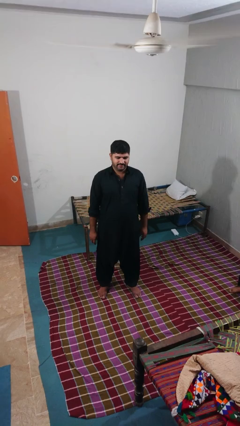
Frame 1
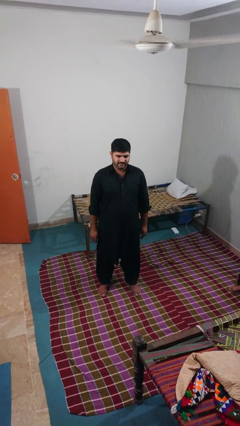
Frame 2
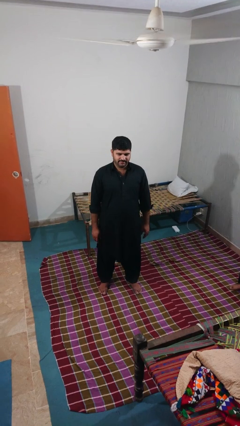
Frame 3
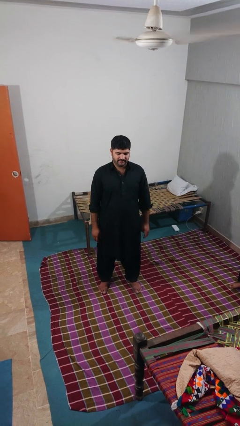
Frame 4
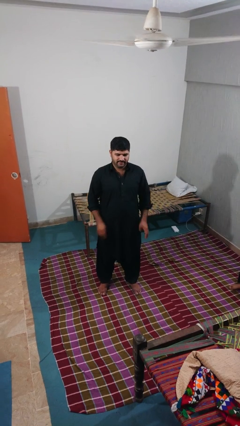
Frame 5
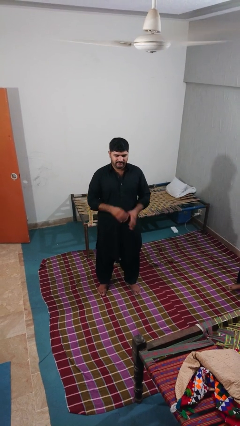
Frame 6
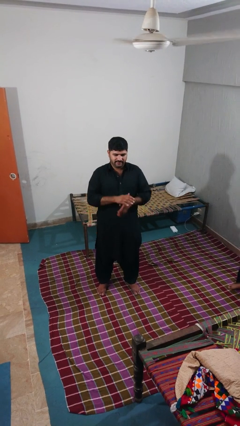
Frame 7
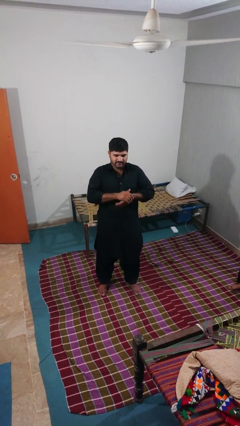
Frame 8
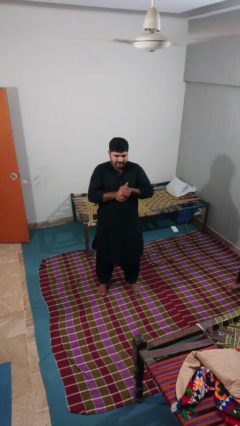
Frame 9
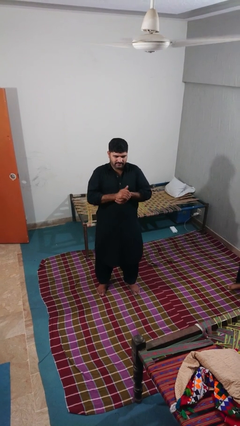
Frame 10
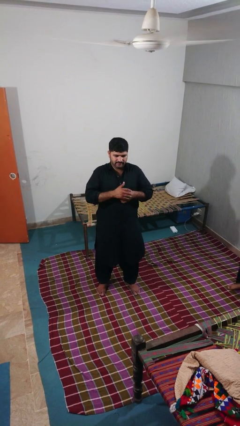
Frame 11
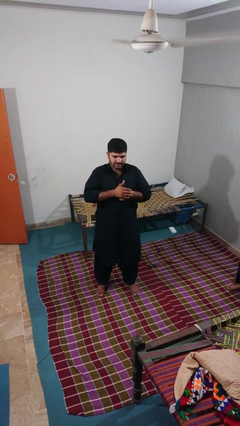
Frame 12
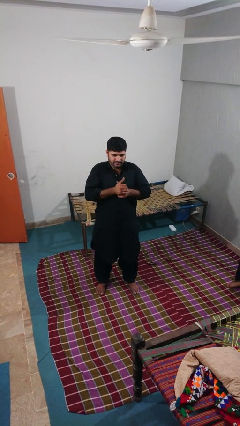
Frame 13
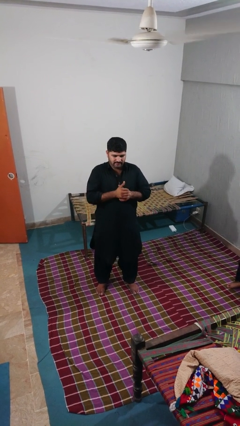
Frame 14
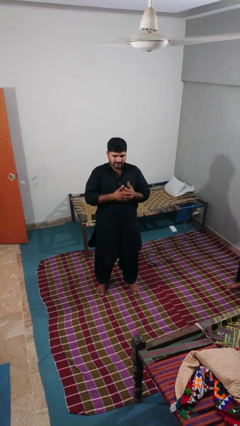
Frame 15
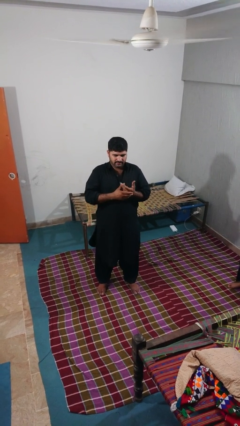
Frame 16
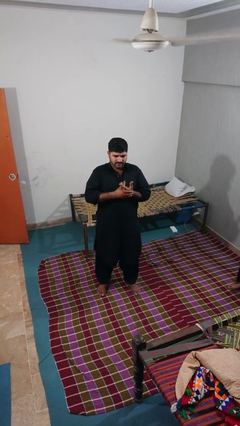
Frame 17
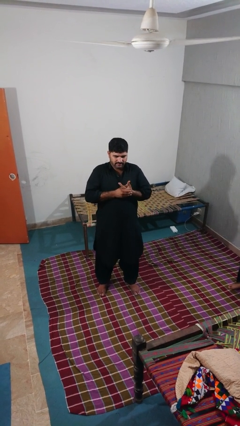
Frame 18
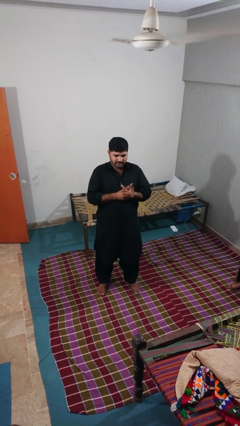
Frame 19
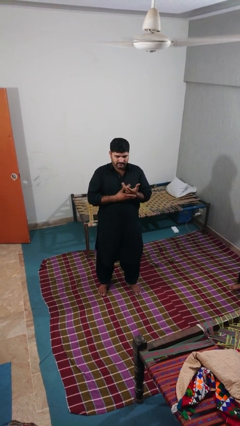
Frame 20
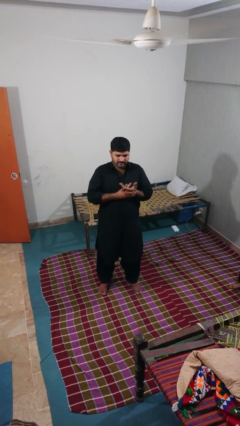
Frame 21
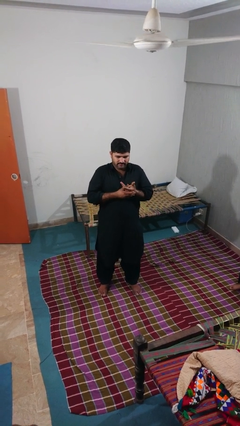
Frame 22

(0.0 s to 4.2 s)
person cracks knuckles

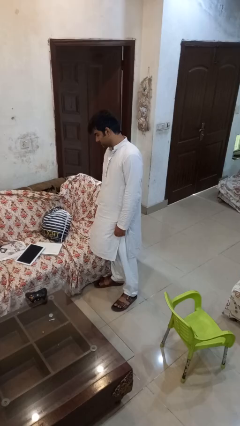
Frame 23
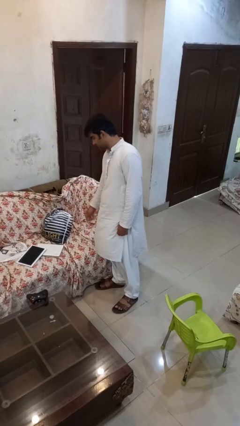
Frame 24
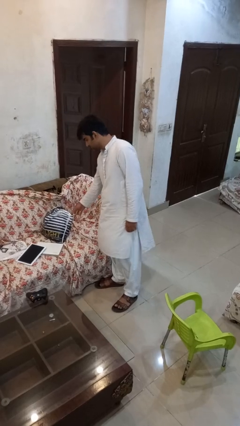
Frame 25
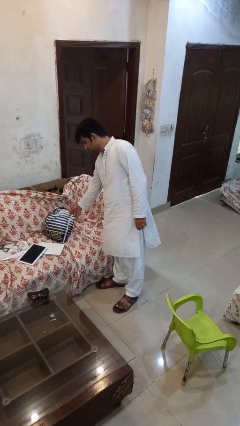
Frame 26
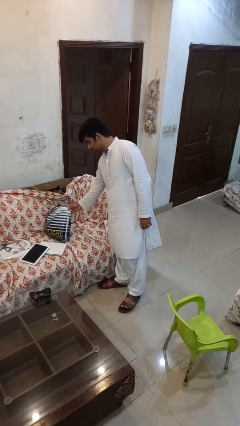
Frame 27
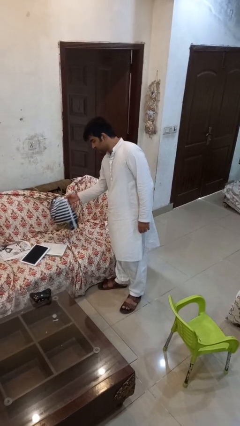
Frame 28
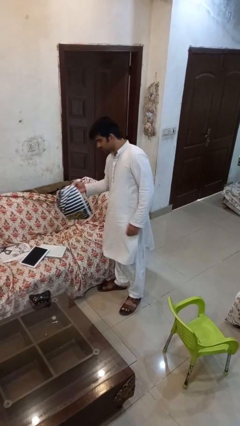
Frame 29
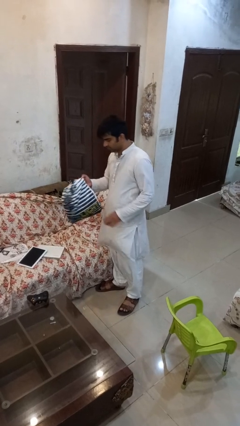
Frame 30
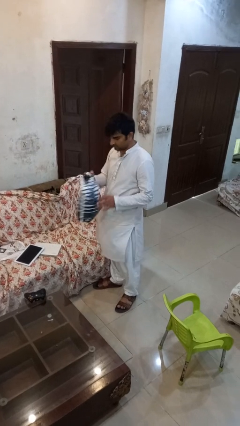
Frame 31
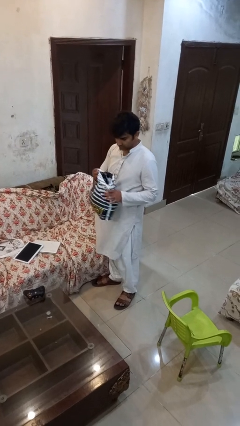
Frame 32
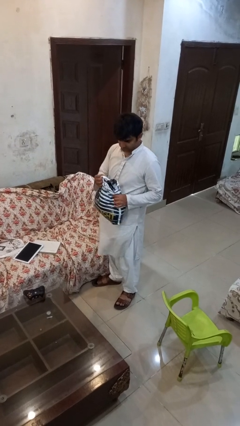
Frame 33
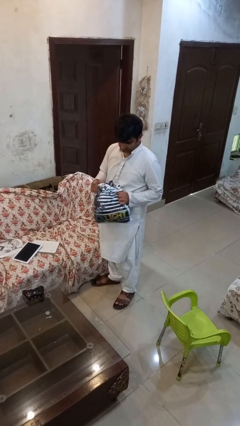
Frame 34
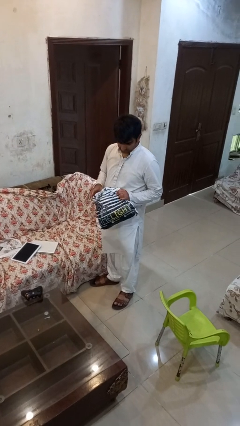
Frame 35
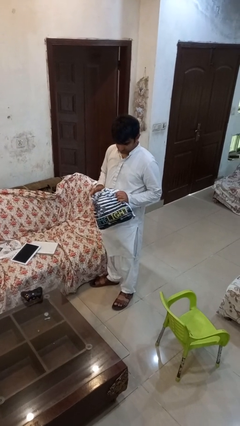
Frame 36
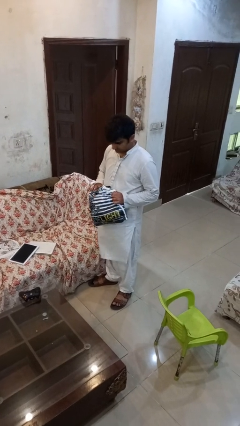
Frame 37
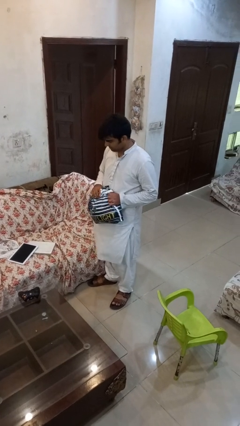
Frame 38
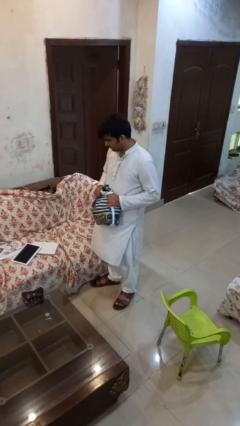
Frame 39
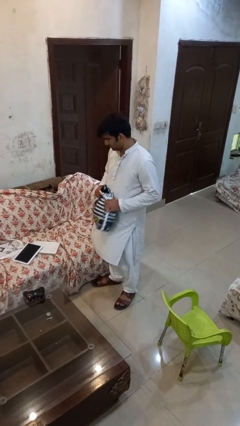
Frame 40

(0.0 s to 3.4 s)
person picks up object from couch

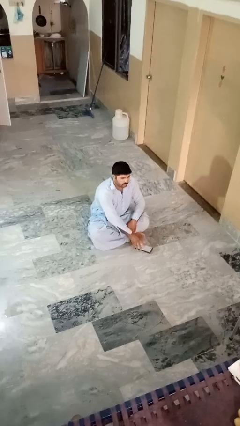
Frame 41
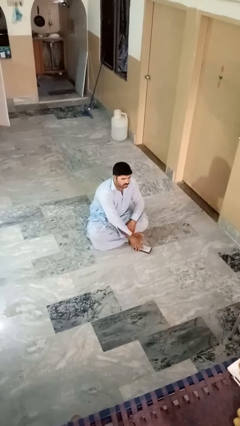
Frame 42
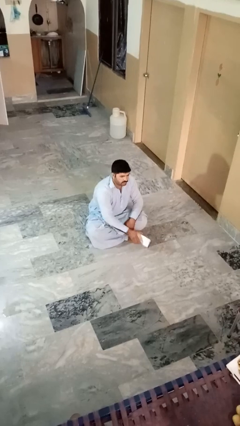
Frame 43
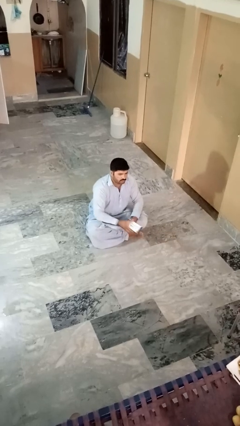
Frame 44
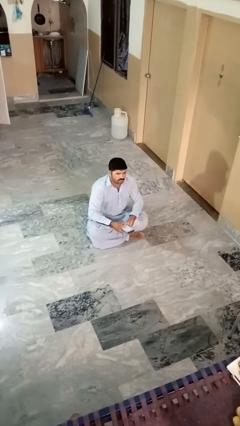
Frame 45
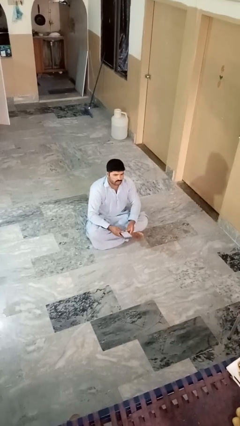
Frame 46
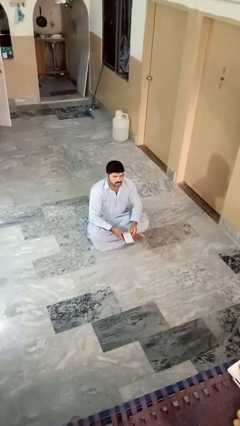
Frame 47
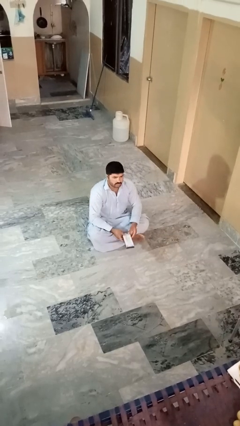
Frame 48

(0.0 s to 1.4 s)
person picks up object from floor

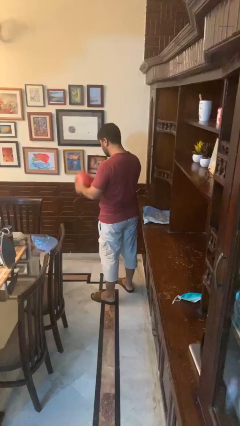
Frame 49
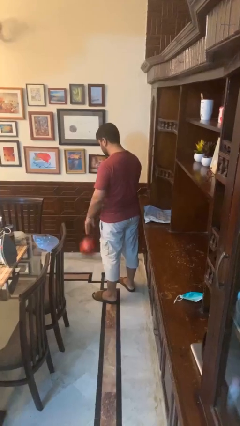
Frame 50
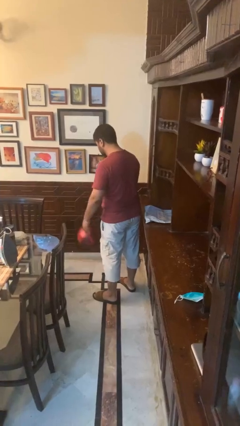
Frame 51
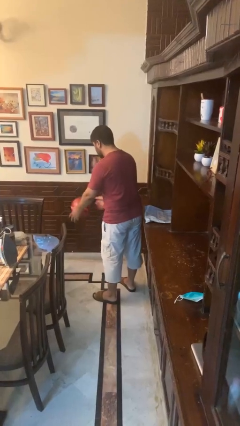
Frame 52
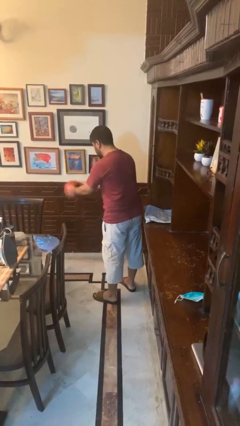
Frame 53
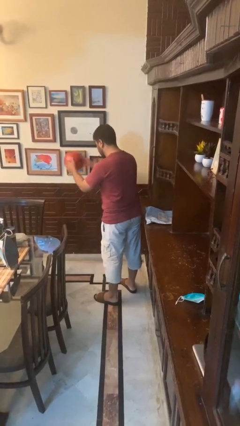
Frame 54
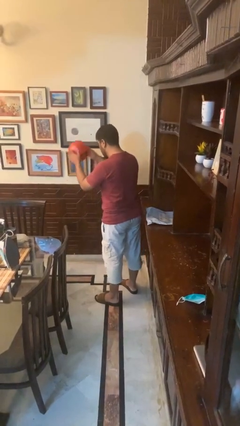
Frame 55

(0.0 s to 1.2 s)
person bounces ball on floor

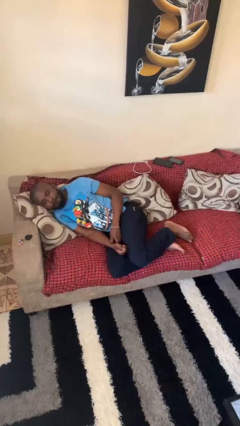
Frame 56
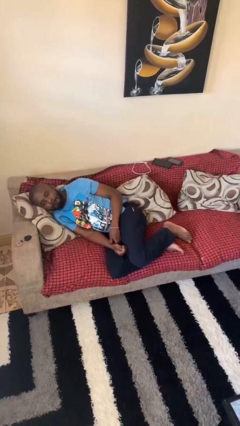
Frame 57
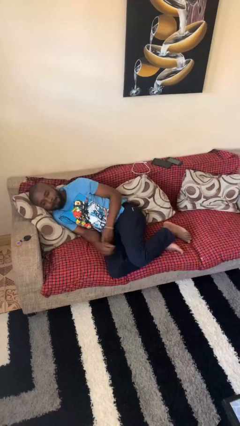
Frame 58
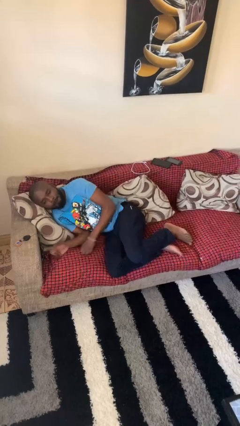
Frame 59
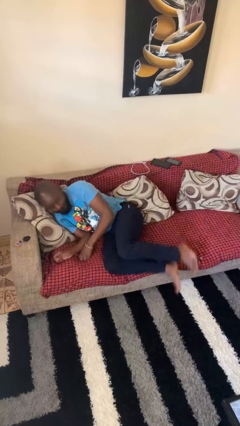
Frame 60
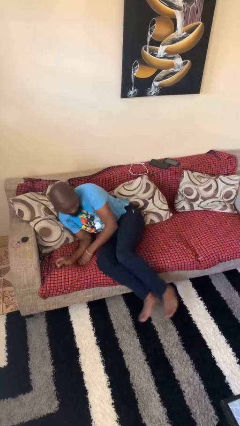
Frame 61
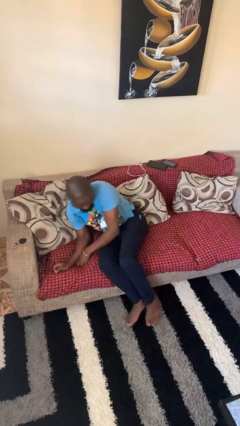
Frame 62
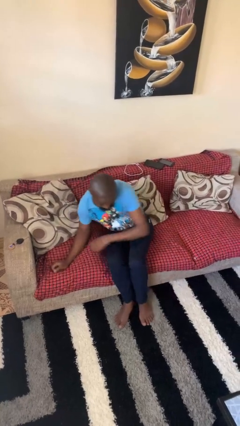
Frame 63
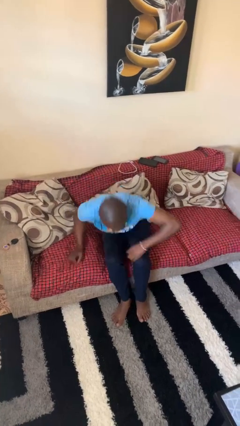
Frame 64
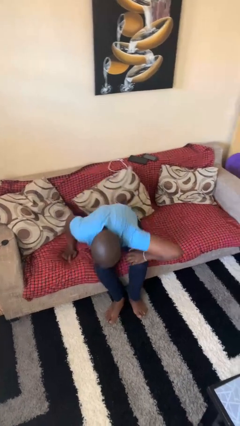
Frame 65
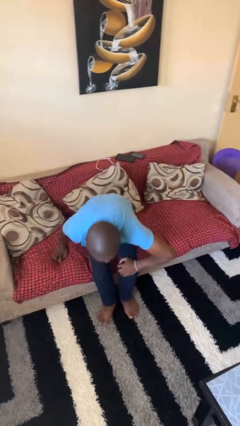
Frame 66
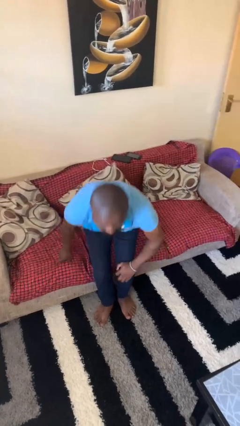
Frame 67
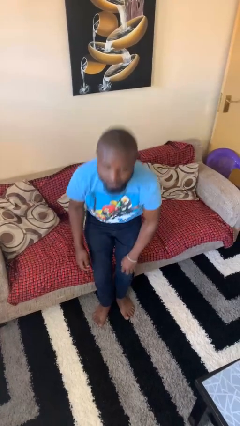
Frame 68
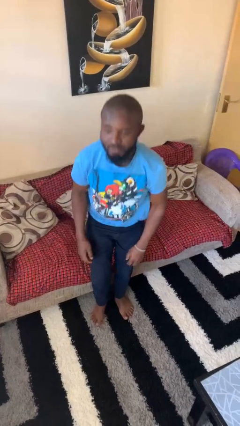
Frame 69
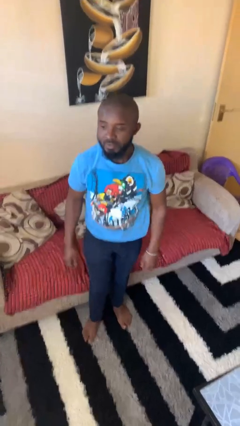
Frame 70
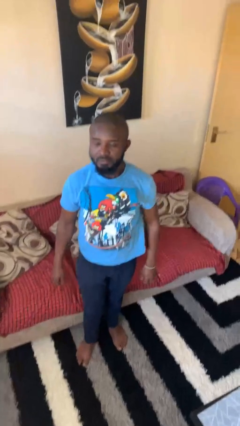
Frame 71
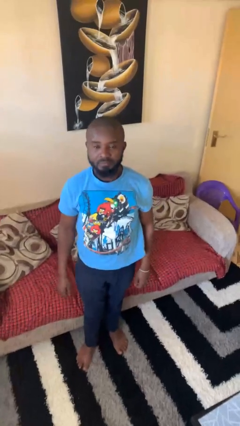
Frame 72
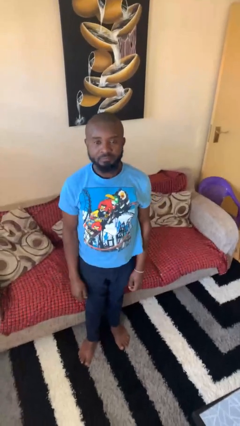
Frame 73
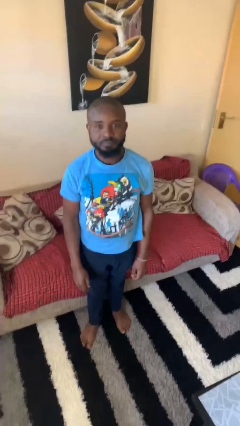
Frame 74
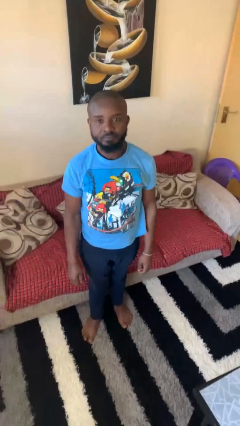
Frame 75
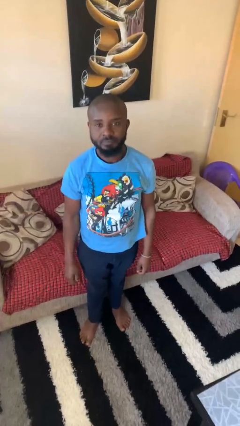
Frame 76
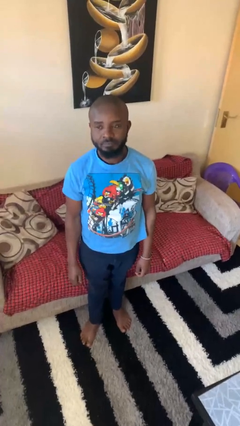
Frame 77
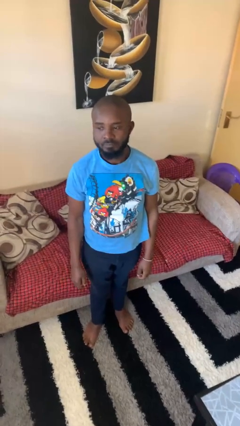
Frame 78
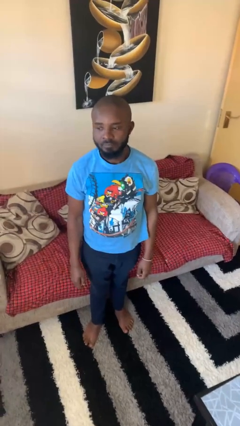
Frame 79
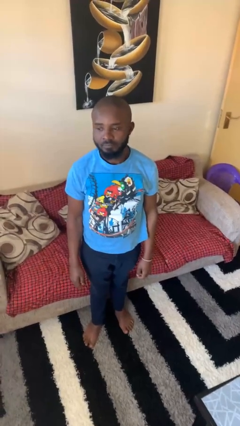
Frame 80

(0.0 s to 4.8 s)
person stands up

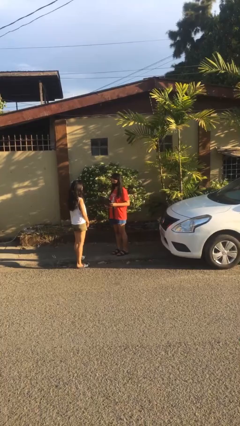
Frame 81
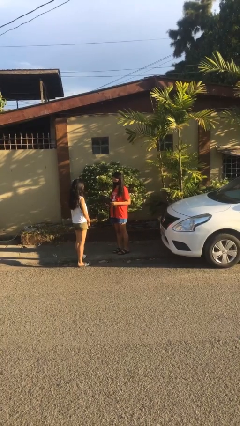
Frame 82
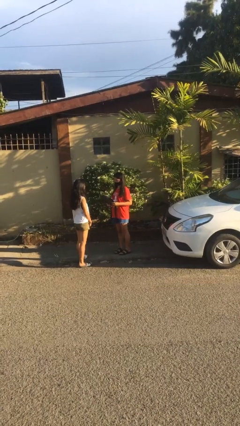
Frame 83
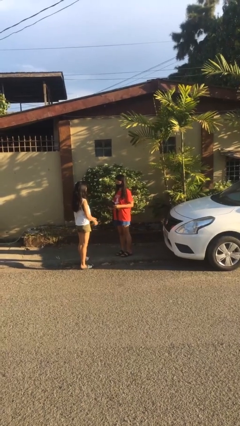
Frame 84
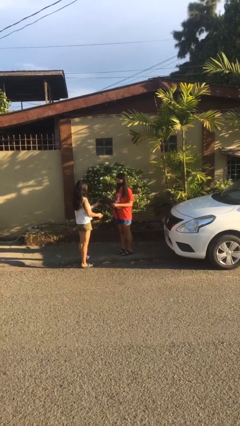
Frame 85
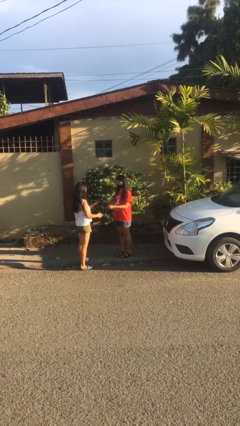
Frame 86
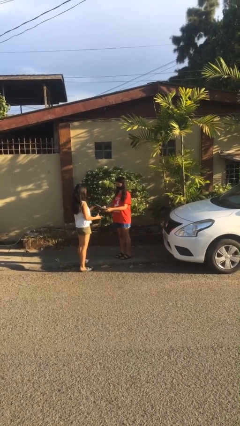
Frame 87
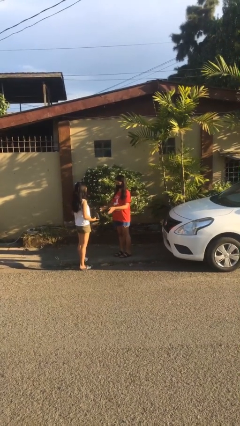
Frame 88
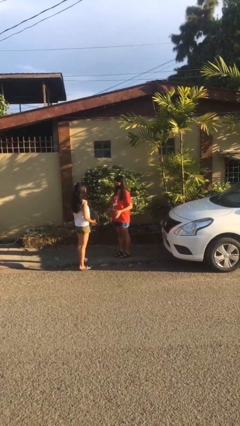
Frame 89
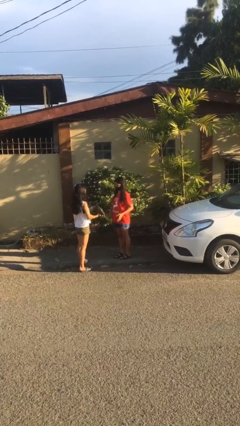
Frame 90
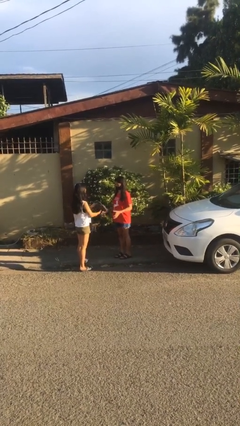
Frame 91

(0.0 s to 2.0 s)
person transfers object to person

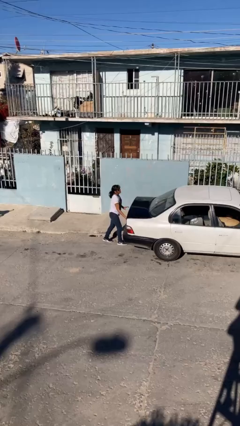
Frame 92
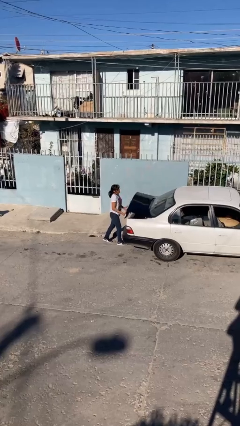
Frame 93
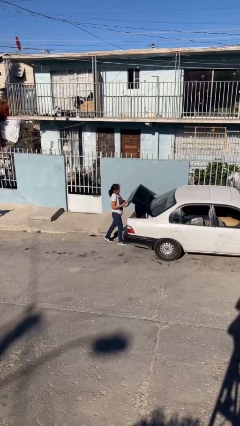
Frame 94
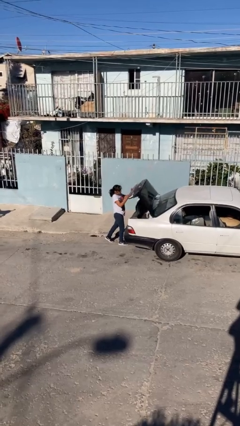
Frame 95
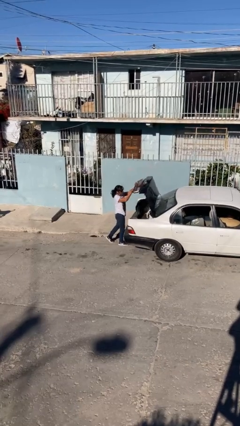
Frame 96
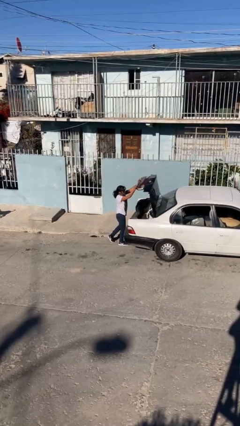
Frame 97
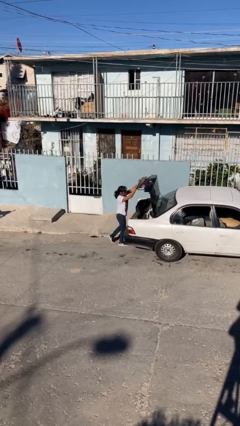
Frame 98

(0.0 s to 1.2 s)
person opens car trunk
